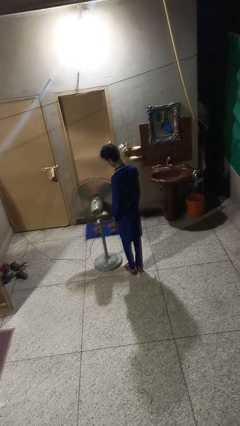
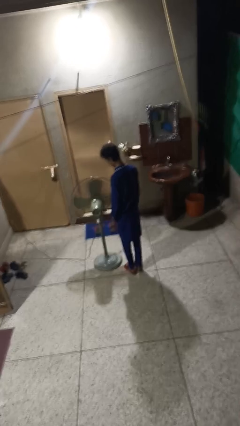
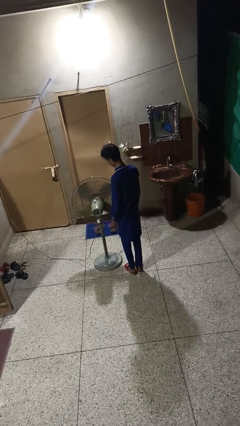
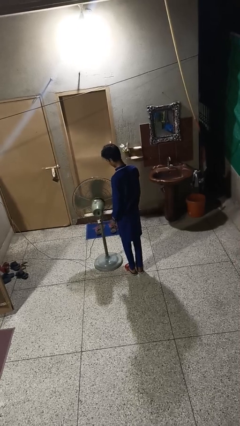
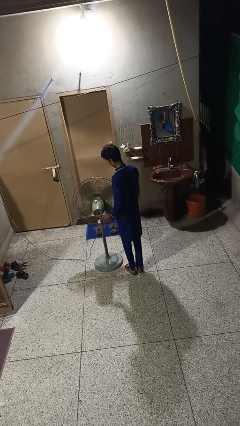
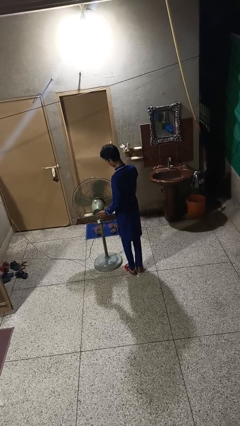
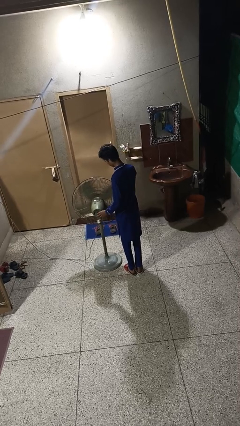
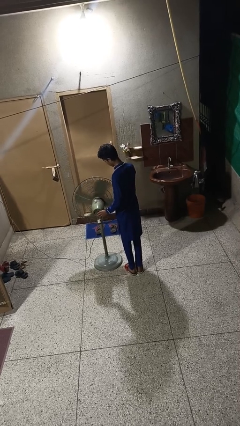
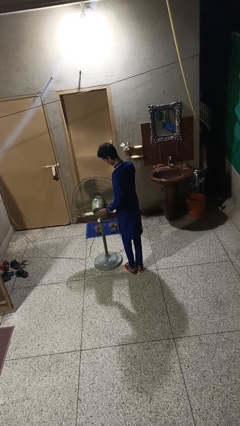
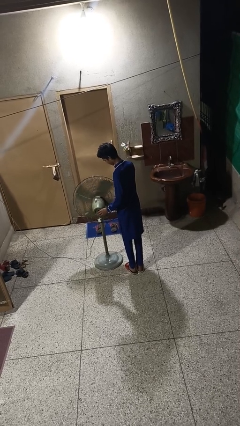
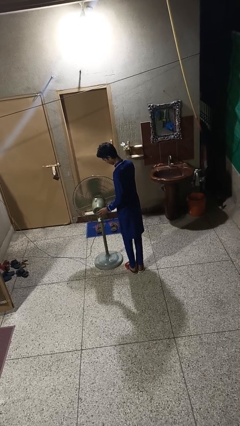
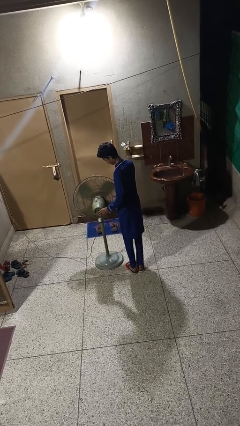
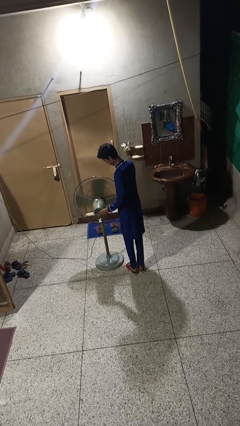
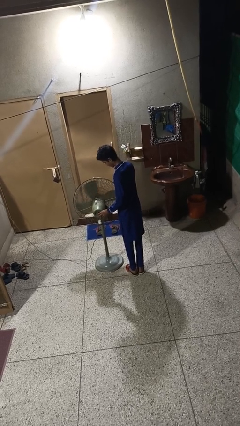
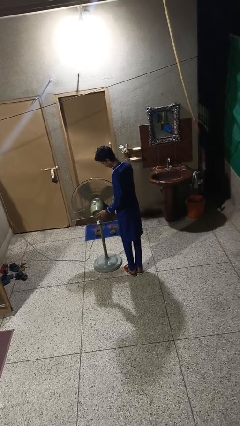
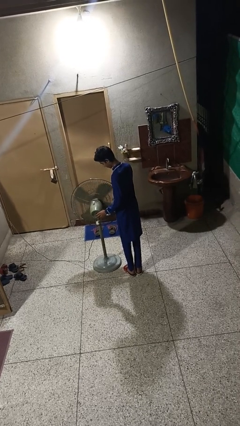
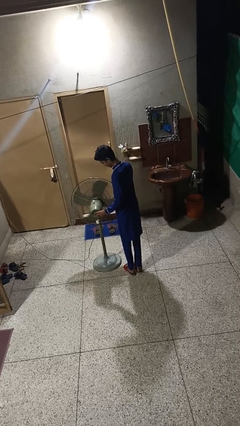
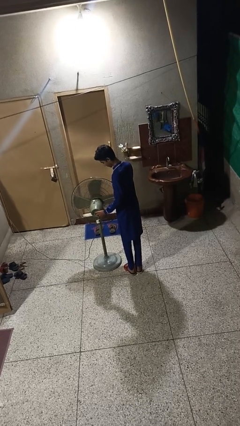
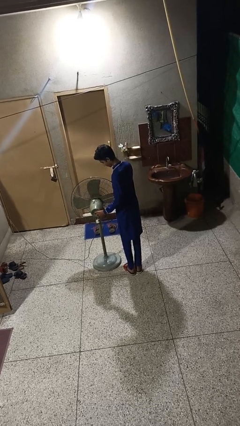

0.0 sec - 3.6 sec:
person turns off fan

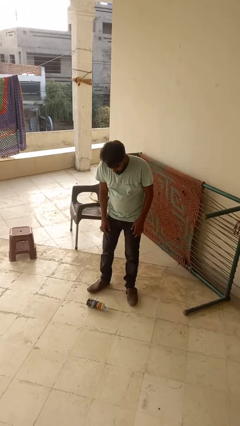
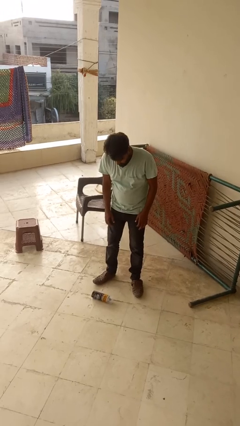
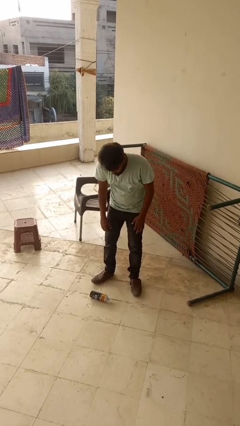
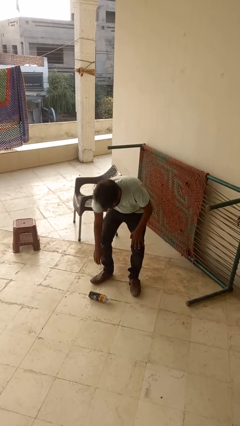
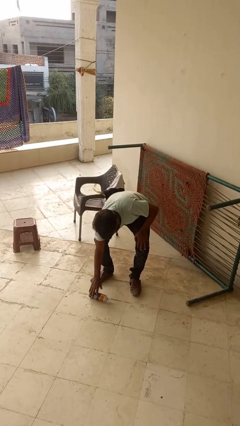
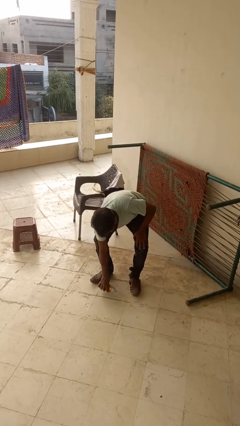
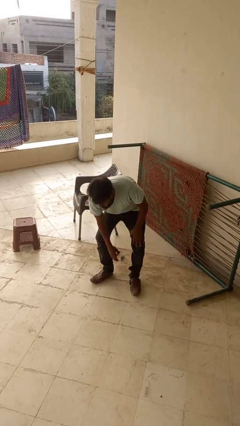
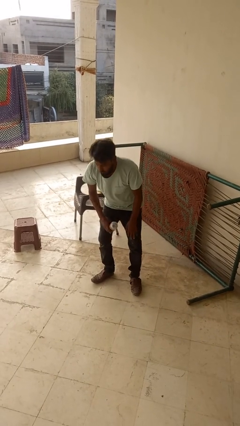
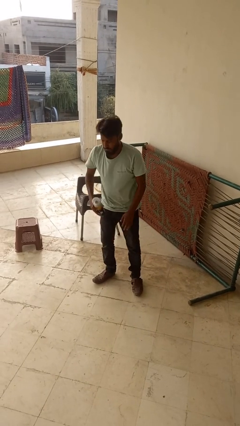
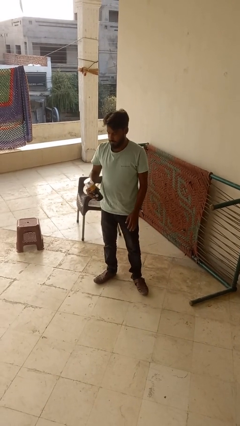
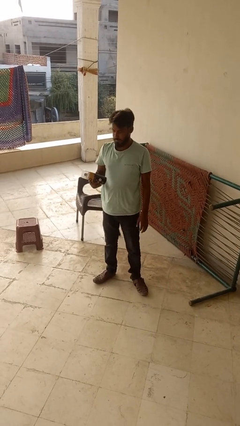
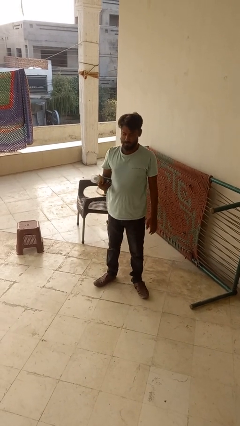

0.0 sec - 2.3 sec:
person picks up object from floor

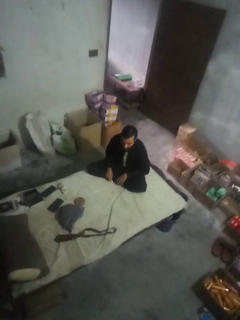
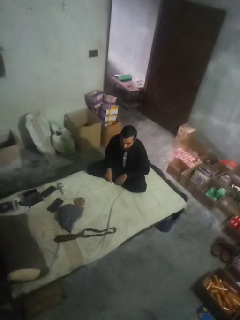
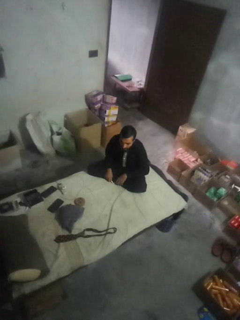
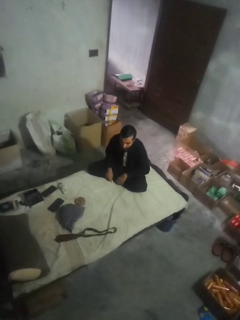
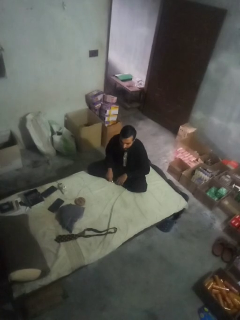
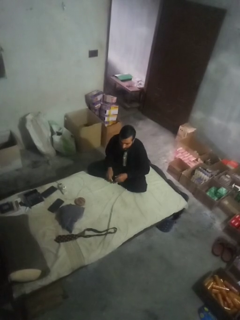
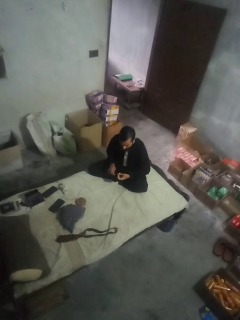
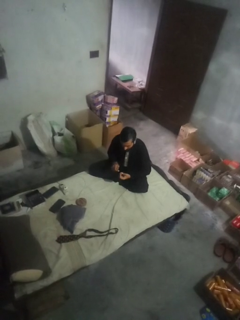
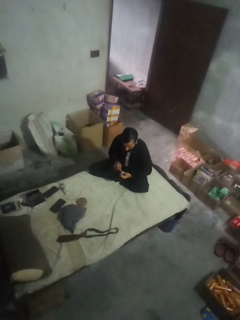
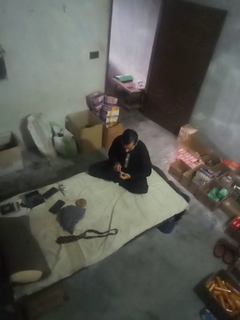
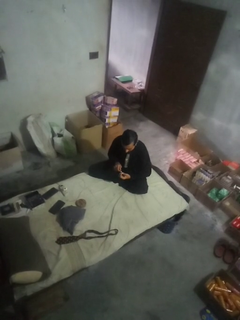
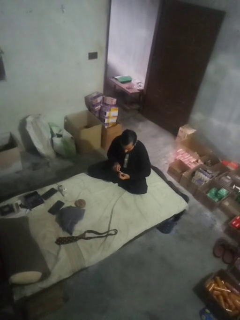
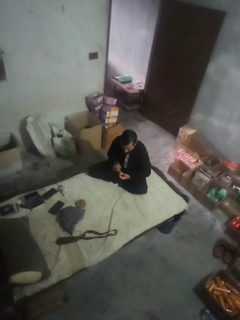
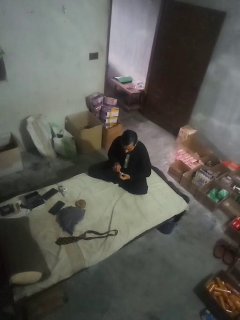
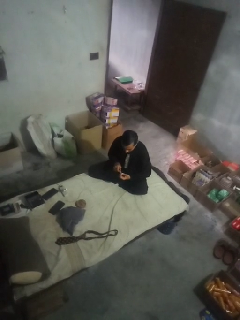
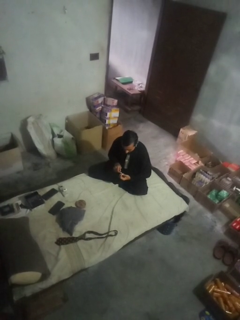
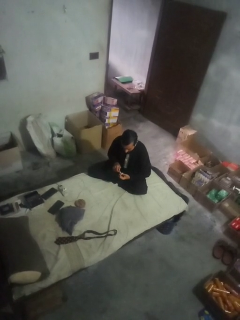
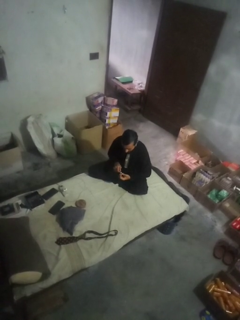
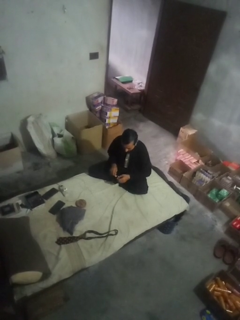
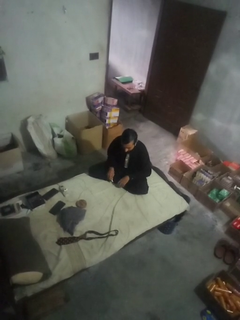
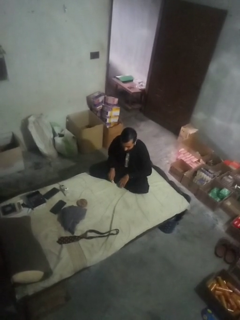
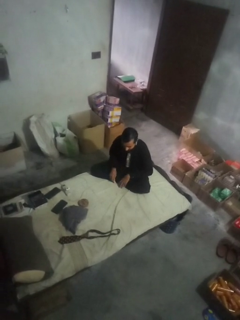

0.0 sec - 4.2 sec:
person paints fingernails

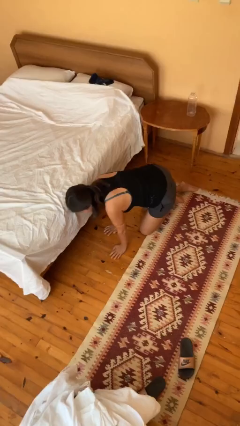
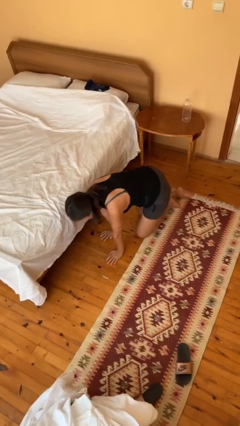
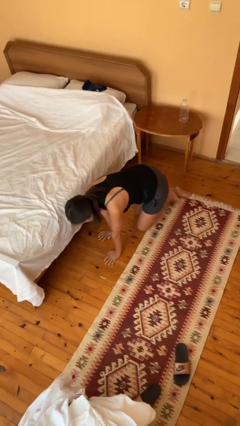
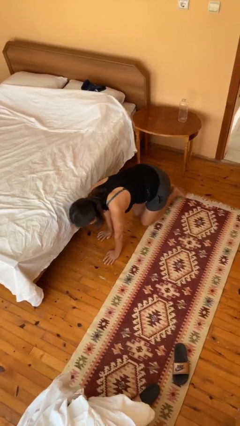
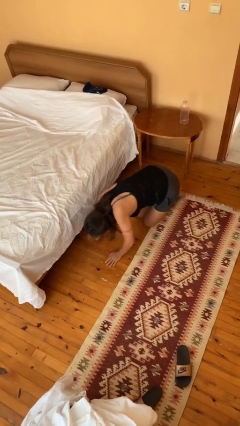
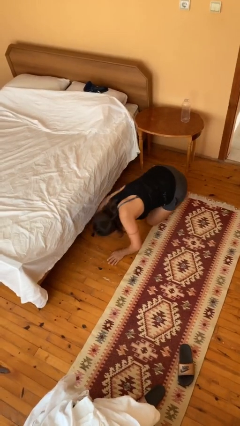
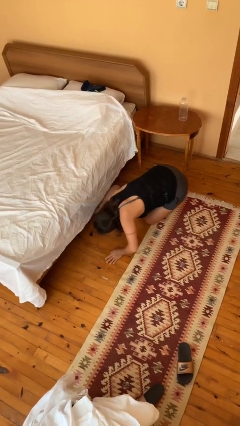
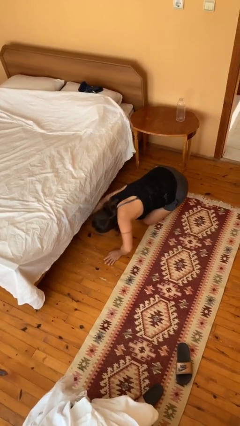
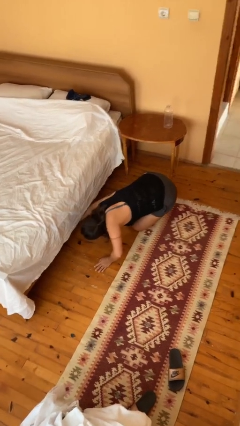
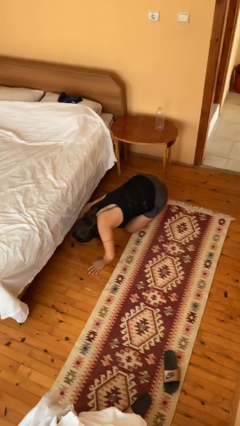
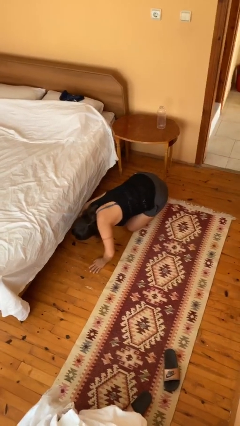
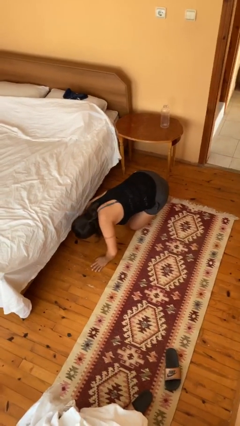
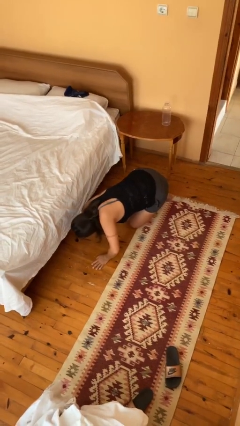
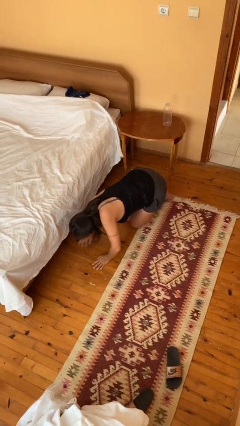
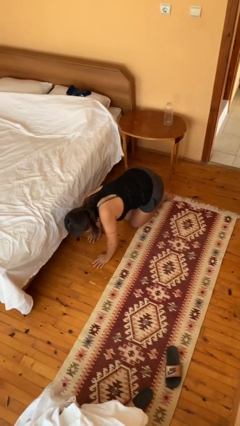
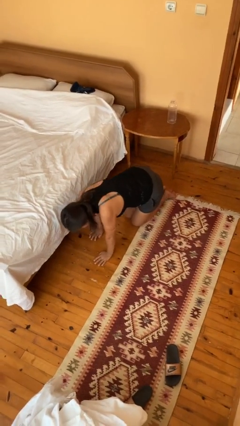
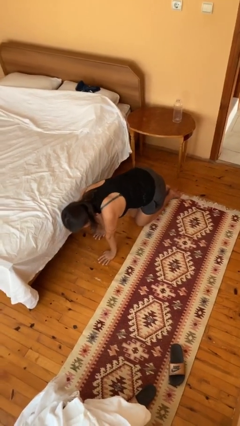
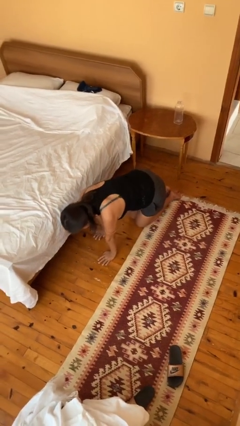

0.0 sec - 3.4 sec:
person searches under bed

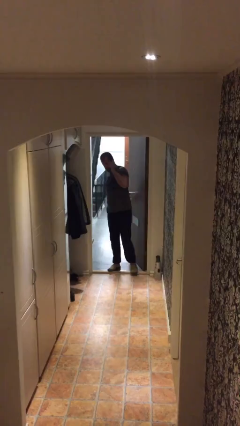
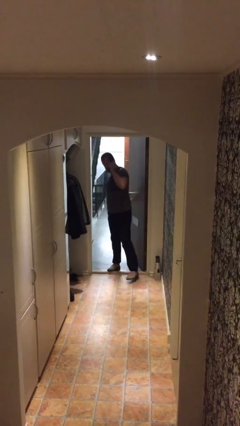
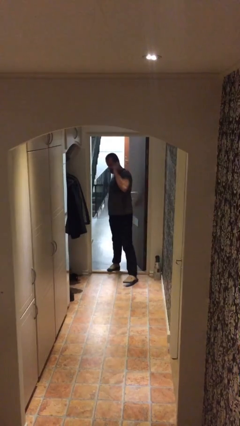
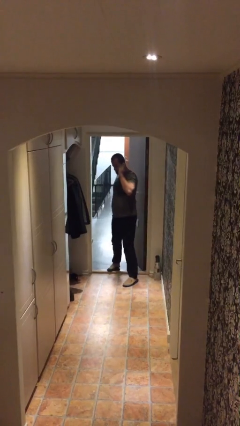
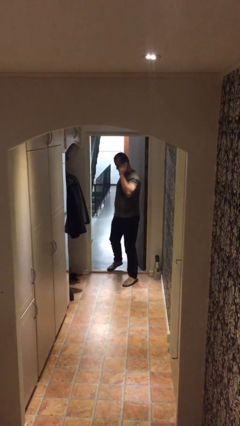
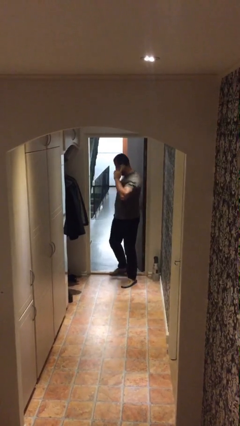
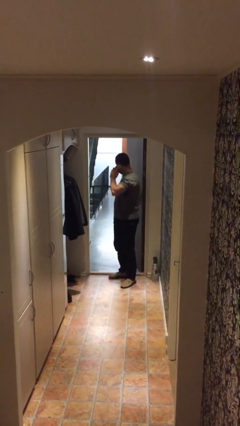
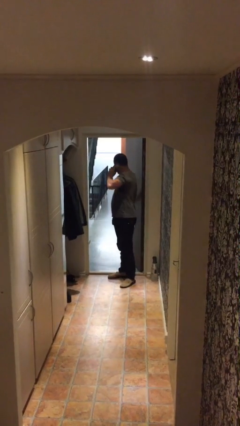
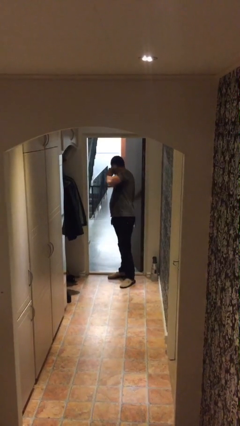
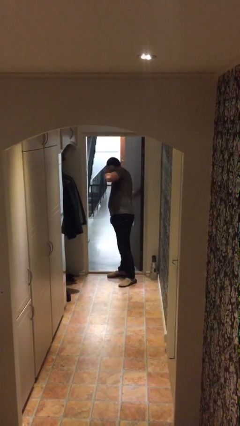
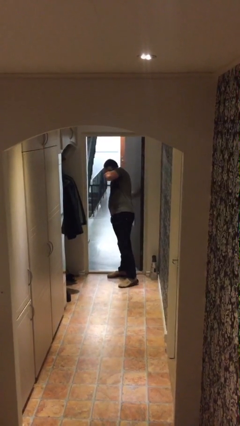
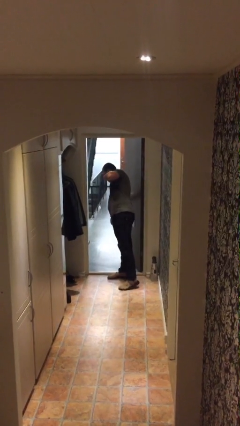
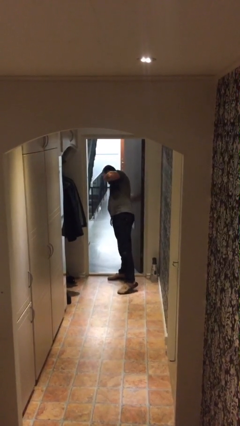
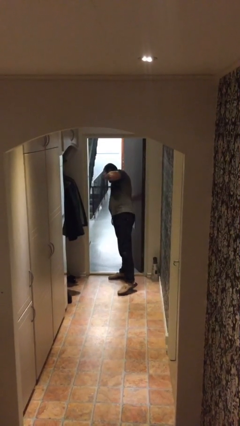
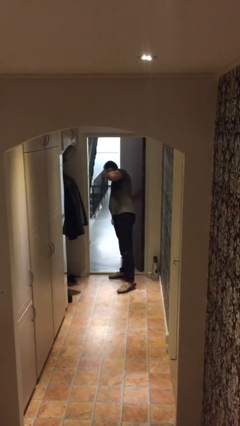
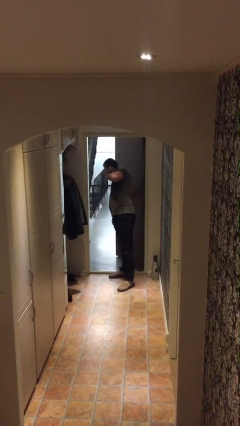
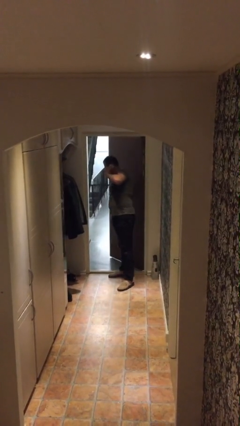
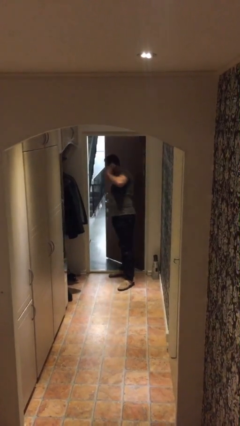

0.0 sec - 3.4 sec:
person enters scene through structure

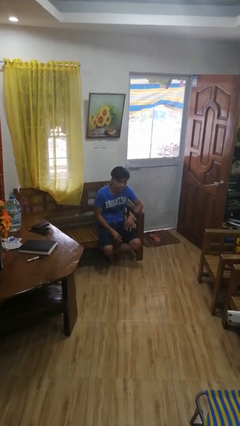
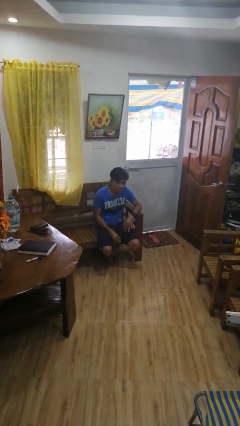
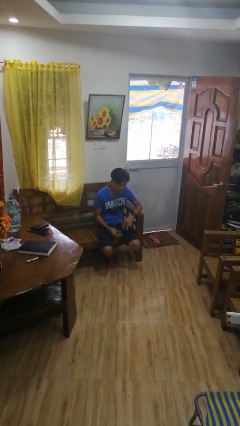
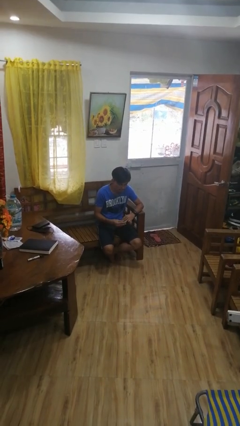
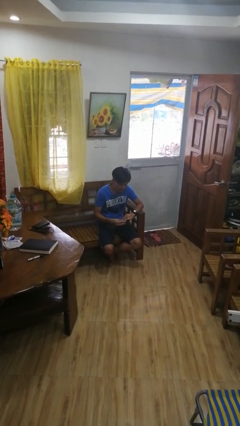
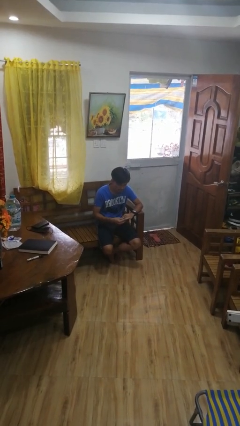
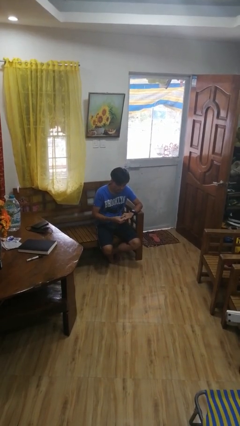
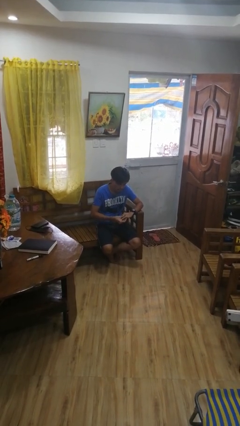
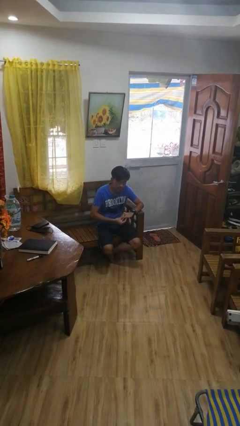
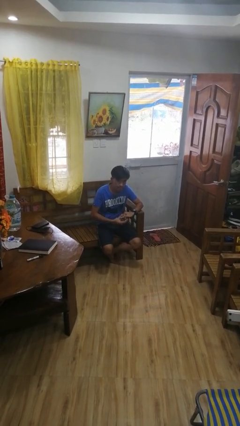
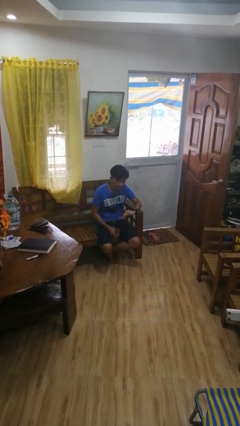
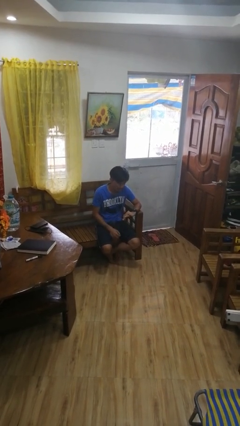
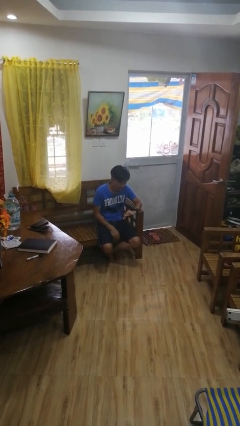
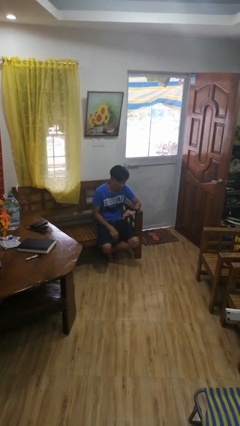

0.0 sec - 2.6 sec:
person puts on ring
